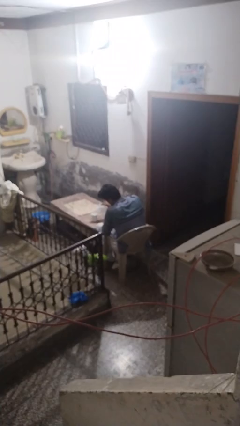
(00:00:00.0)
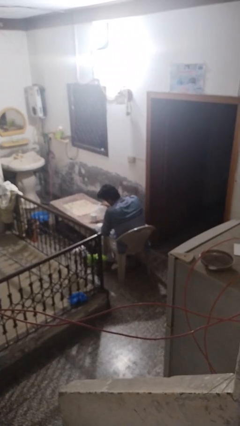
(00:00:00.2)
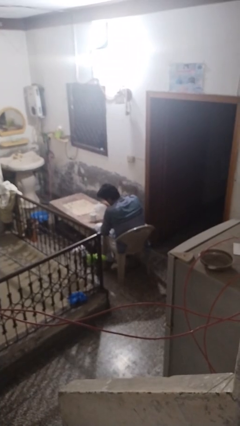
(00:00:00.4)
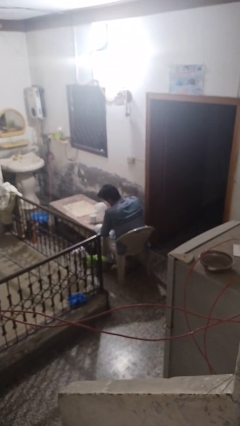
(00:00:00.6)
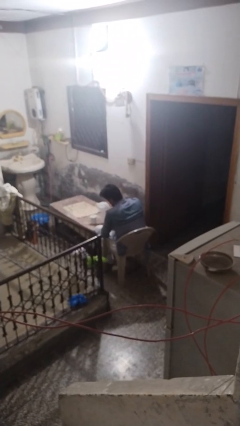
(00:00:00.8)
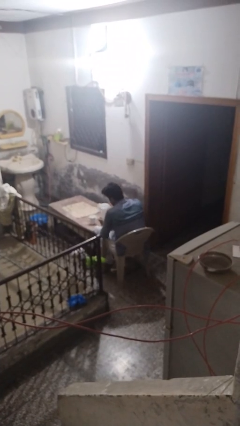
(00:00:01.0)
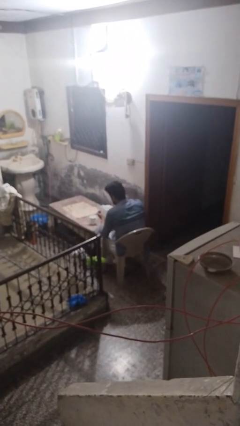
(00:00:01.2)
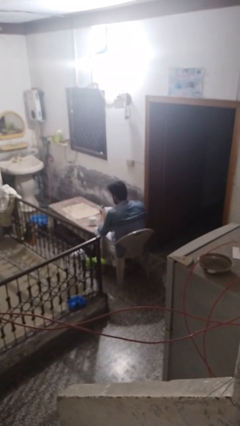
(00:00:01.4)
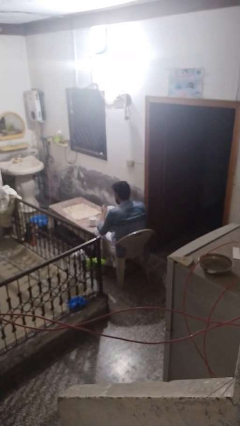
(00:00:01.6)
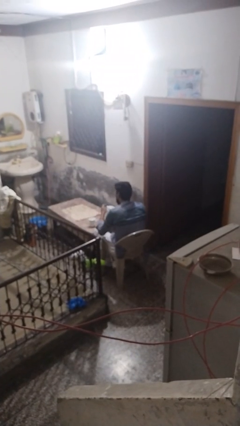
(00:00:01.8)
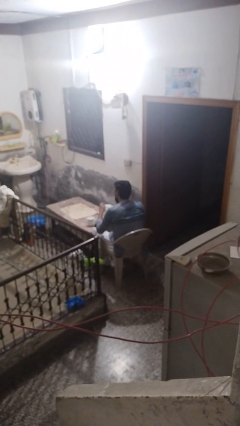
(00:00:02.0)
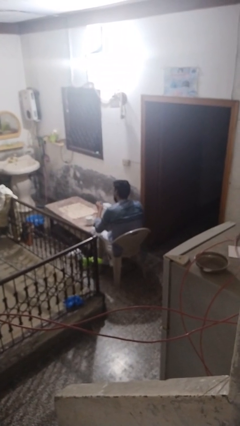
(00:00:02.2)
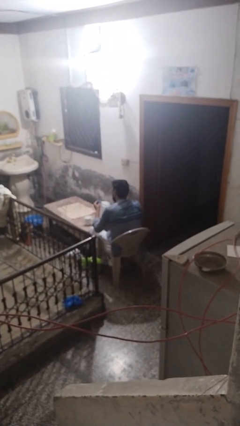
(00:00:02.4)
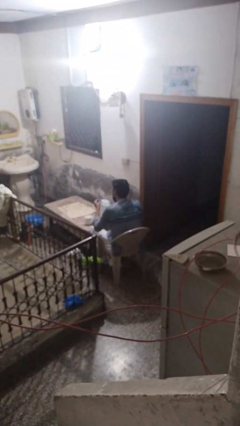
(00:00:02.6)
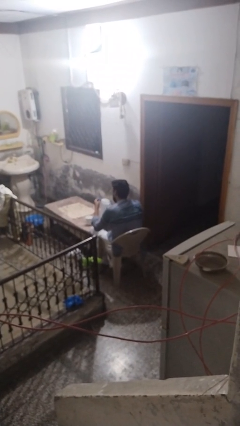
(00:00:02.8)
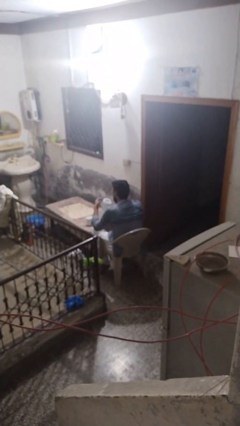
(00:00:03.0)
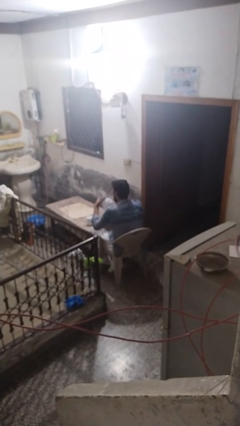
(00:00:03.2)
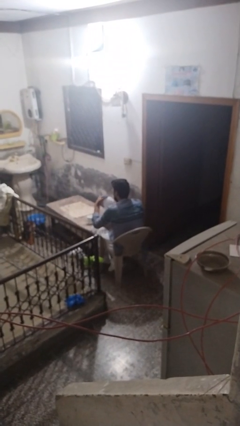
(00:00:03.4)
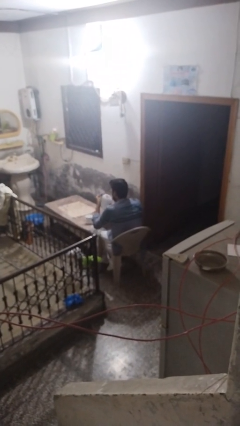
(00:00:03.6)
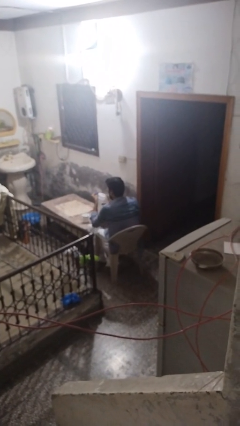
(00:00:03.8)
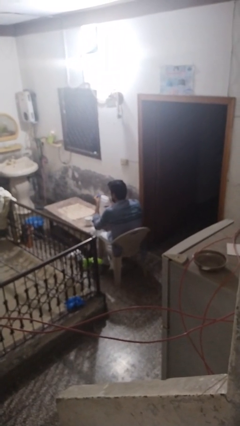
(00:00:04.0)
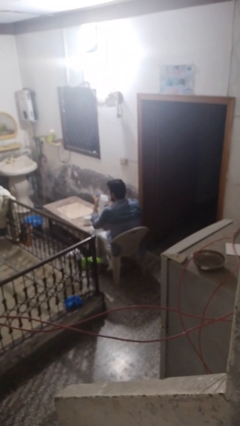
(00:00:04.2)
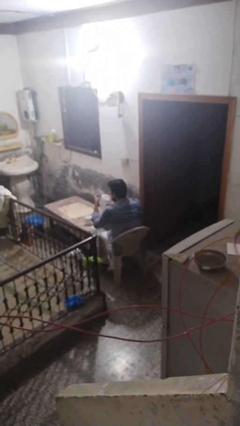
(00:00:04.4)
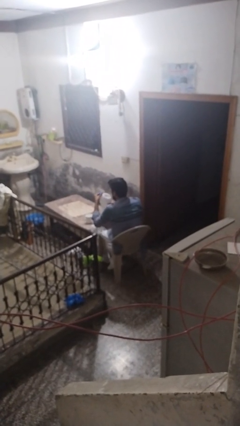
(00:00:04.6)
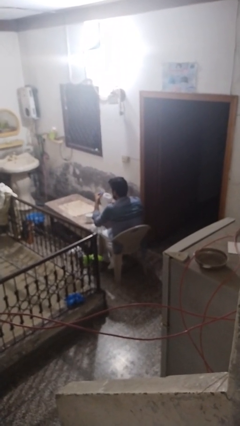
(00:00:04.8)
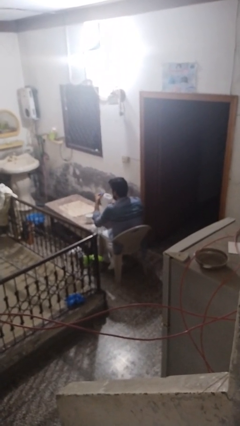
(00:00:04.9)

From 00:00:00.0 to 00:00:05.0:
person screws lid to bottle

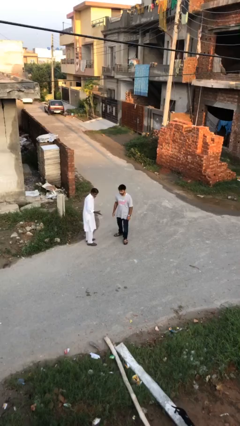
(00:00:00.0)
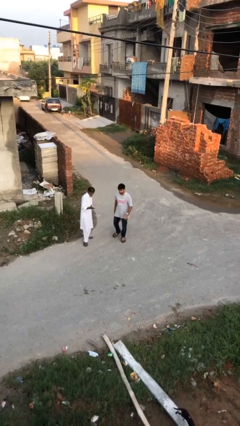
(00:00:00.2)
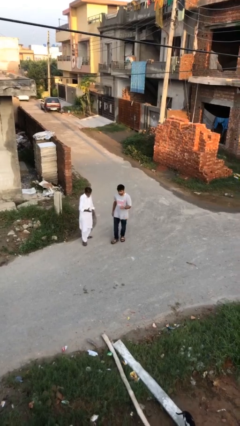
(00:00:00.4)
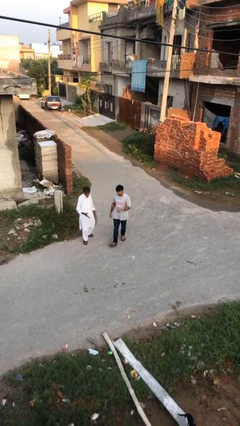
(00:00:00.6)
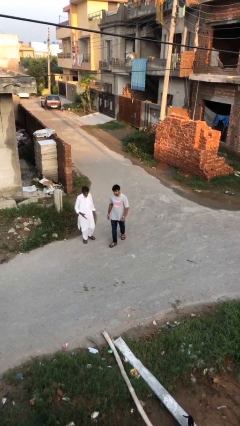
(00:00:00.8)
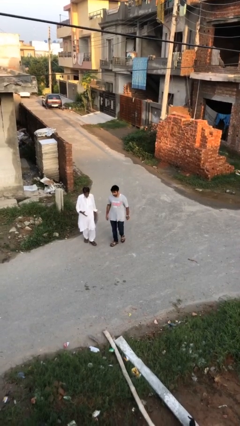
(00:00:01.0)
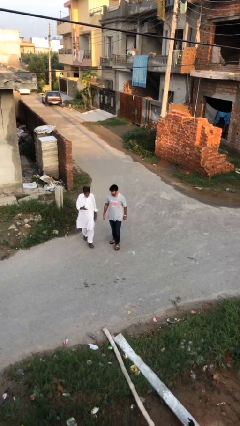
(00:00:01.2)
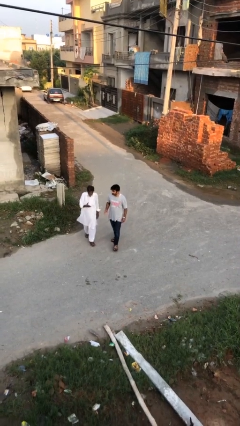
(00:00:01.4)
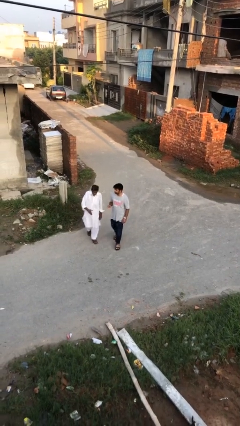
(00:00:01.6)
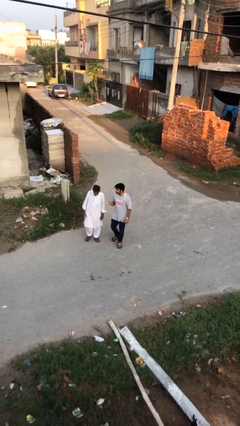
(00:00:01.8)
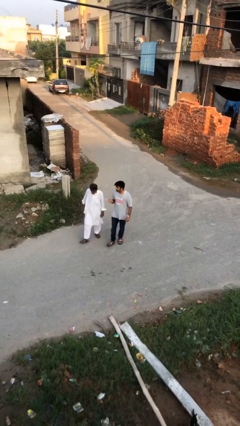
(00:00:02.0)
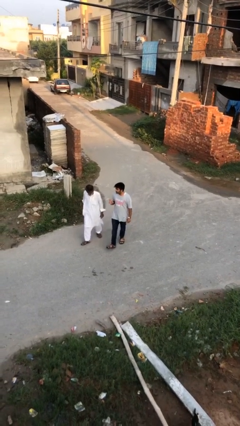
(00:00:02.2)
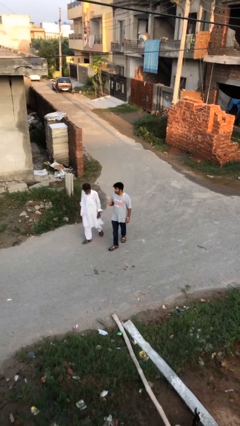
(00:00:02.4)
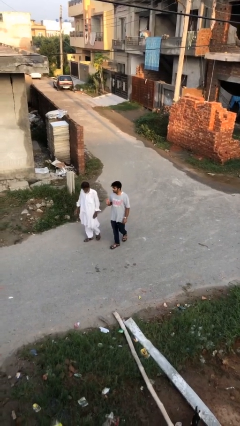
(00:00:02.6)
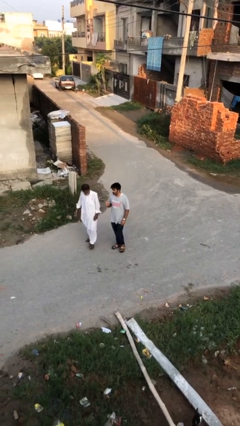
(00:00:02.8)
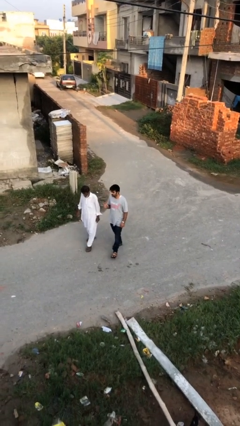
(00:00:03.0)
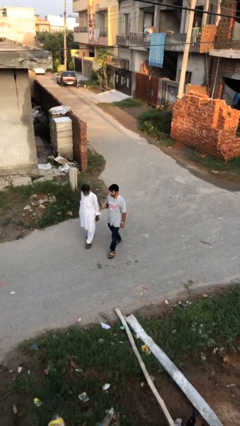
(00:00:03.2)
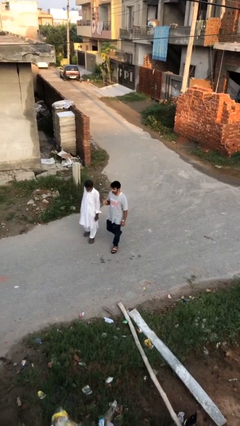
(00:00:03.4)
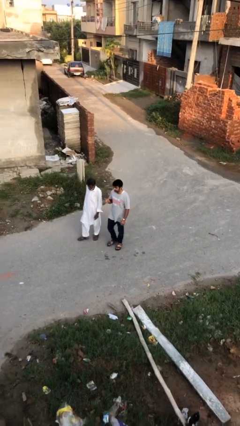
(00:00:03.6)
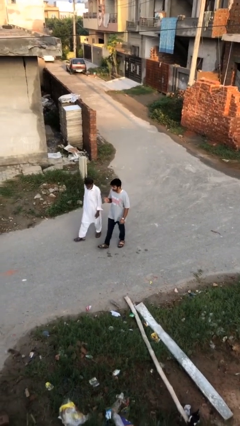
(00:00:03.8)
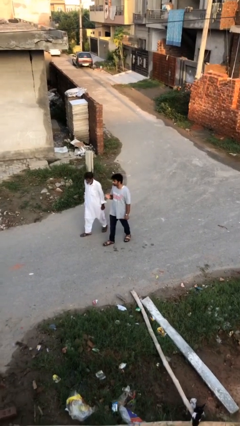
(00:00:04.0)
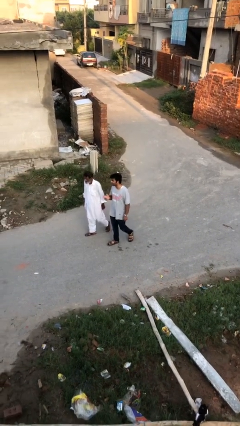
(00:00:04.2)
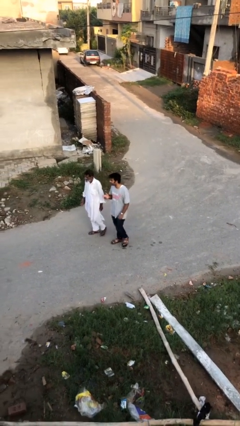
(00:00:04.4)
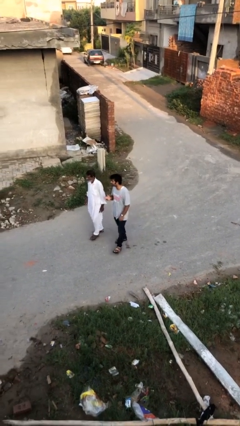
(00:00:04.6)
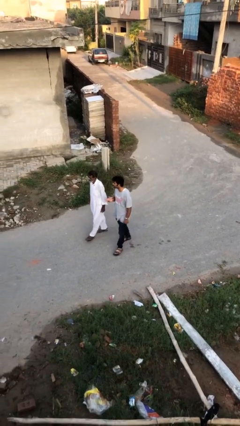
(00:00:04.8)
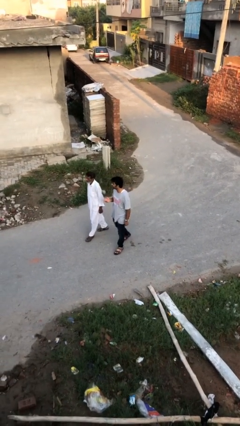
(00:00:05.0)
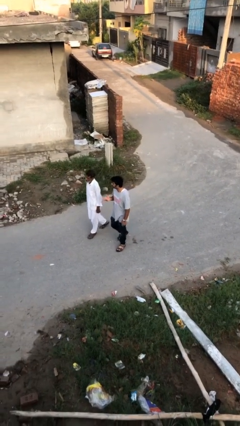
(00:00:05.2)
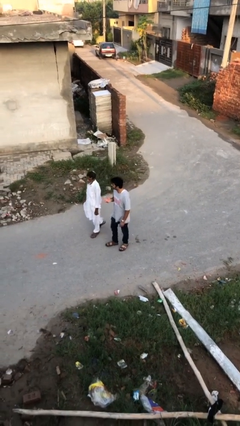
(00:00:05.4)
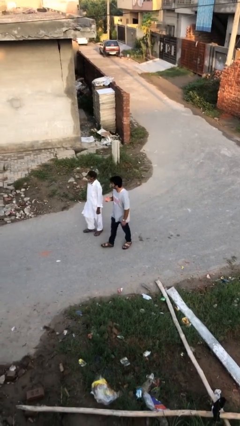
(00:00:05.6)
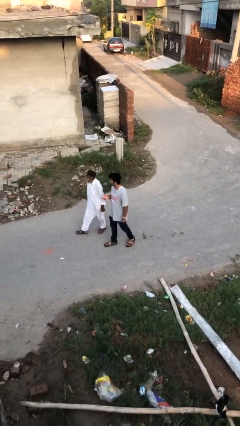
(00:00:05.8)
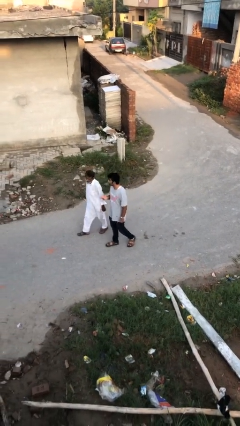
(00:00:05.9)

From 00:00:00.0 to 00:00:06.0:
person talks to person

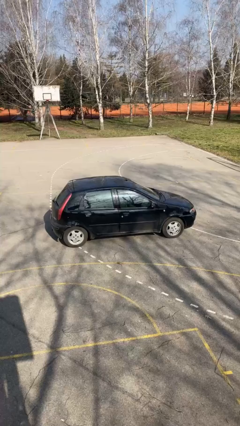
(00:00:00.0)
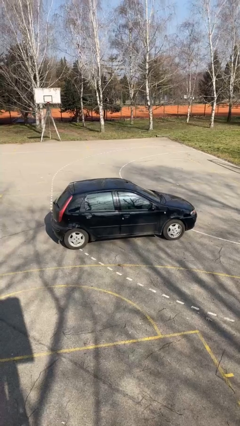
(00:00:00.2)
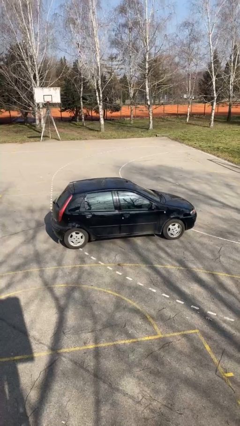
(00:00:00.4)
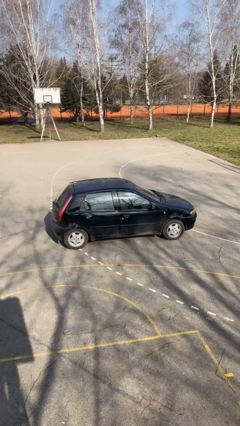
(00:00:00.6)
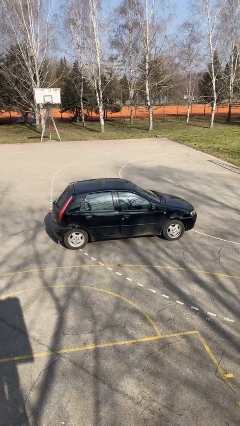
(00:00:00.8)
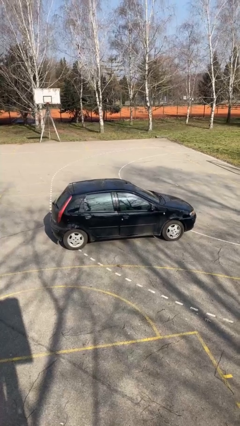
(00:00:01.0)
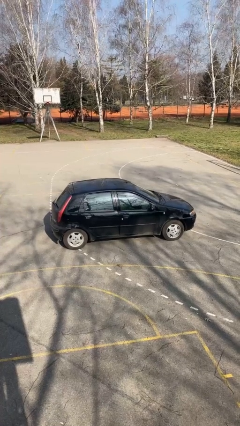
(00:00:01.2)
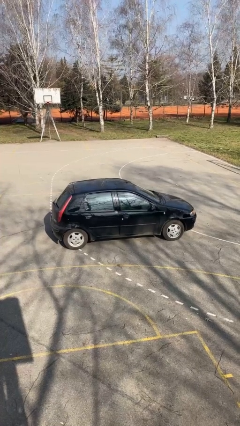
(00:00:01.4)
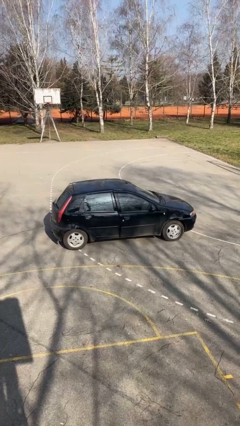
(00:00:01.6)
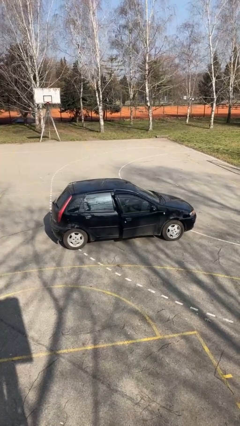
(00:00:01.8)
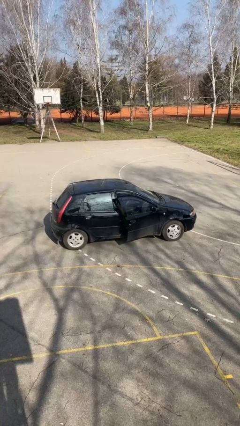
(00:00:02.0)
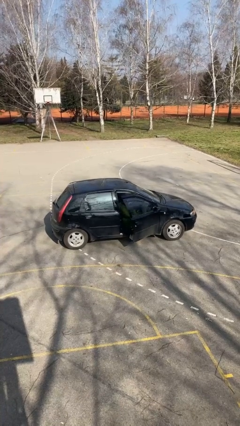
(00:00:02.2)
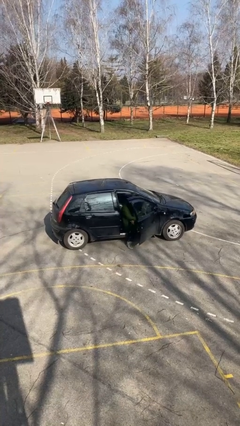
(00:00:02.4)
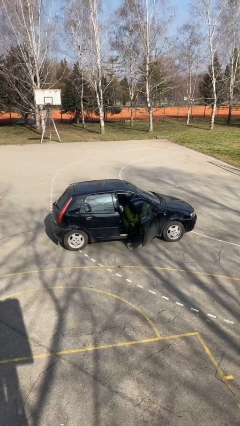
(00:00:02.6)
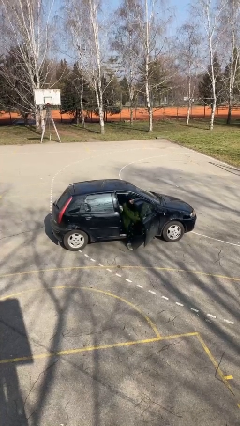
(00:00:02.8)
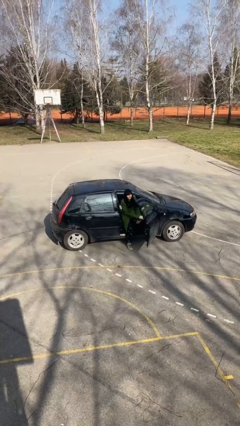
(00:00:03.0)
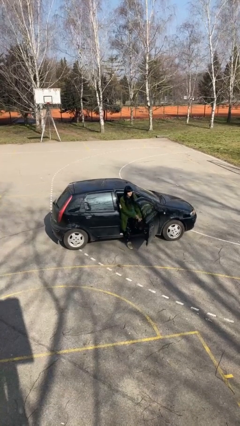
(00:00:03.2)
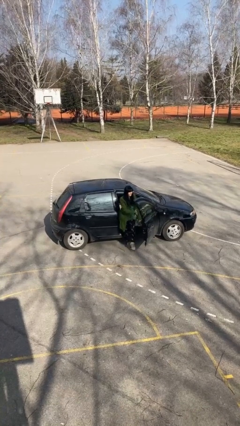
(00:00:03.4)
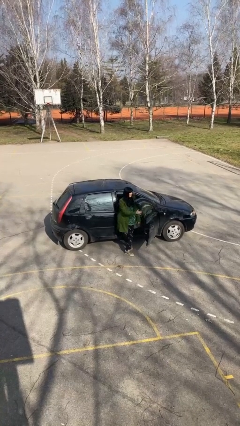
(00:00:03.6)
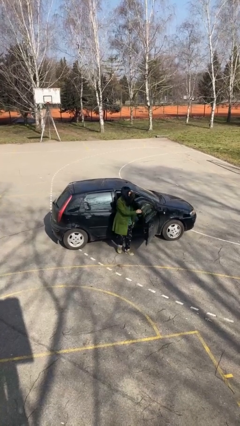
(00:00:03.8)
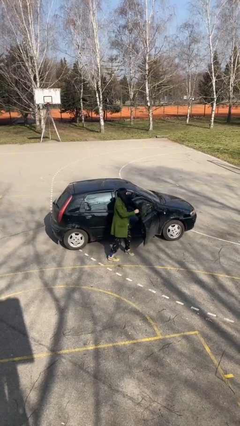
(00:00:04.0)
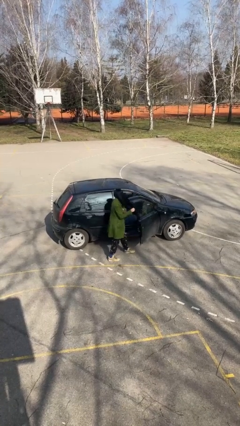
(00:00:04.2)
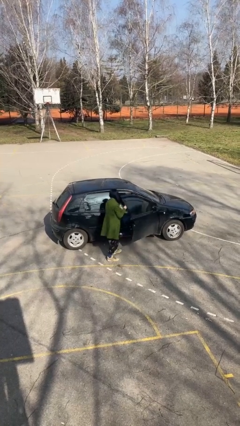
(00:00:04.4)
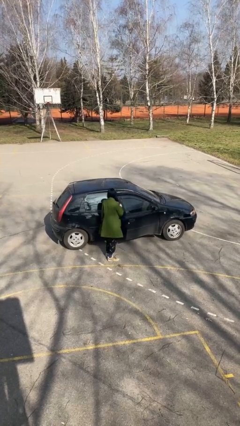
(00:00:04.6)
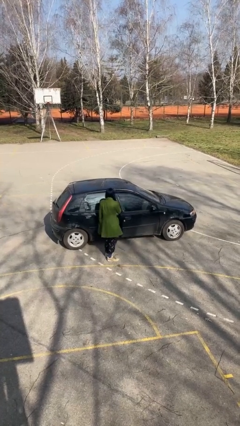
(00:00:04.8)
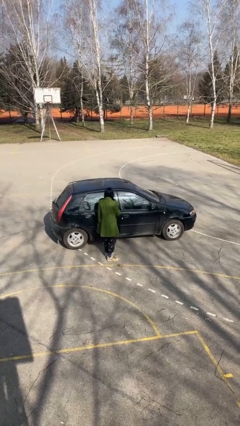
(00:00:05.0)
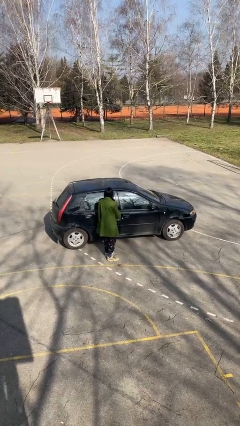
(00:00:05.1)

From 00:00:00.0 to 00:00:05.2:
car drops off person

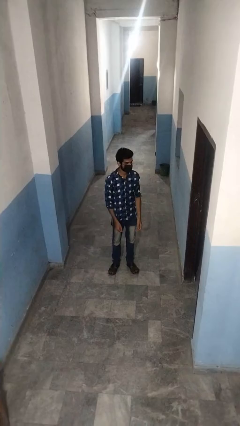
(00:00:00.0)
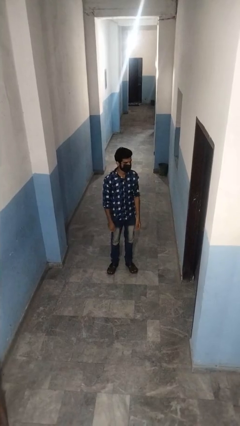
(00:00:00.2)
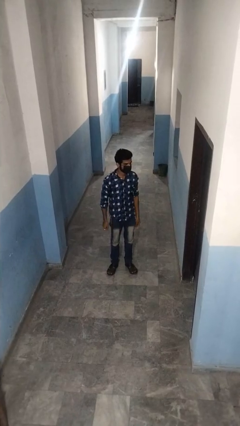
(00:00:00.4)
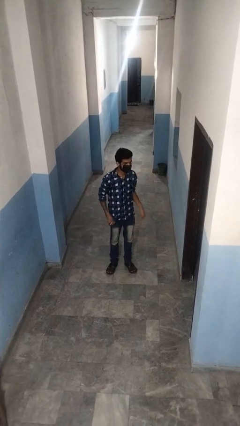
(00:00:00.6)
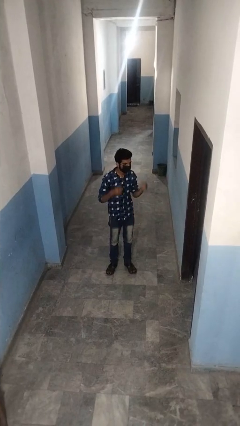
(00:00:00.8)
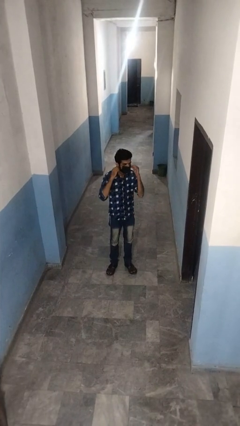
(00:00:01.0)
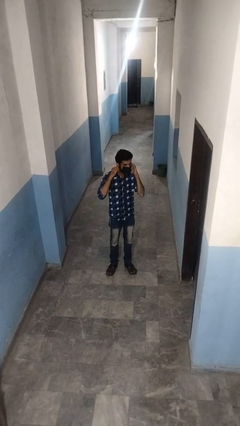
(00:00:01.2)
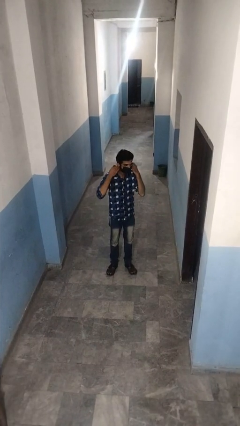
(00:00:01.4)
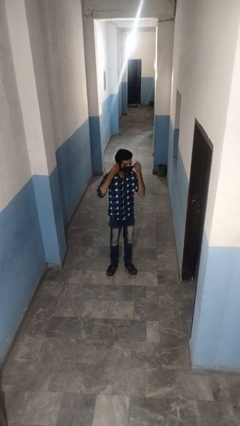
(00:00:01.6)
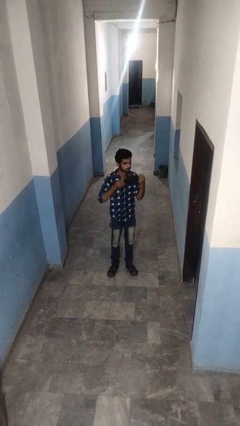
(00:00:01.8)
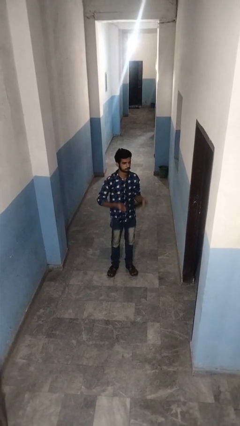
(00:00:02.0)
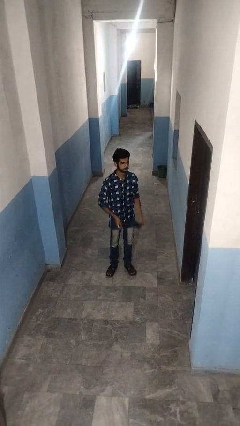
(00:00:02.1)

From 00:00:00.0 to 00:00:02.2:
person takes off facemask
